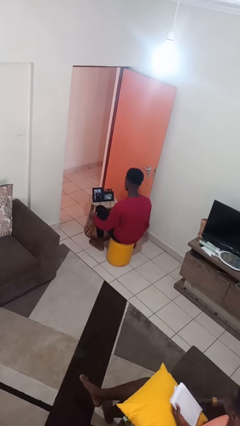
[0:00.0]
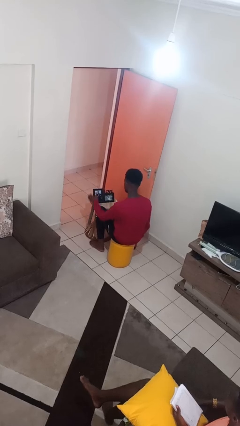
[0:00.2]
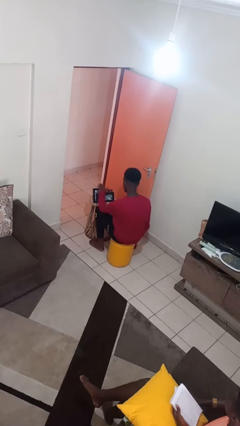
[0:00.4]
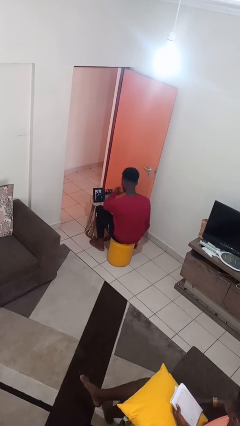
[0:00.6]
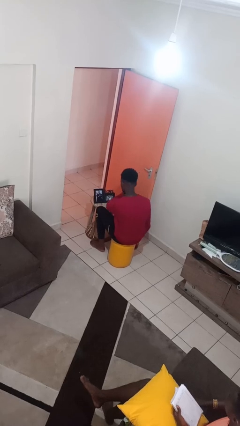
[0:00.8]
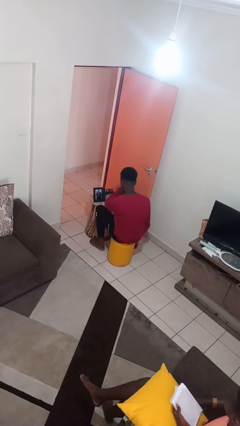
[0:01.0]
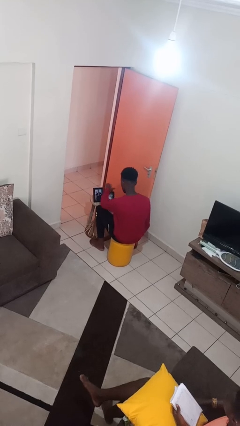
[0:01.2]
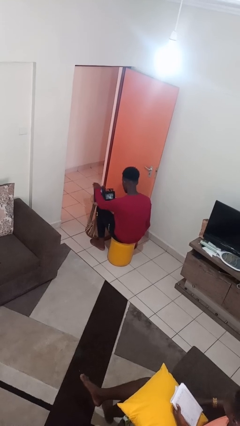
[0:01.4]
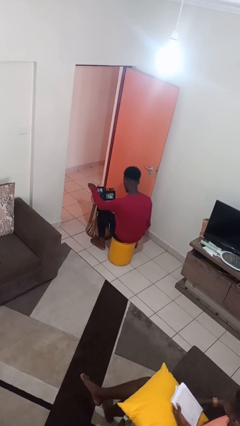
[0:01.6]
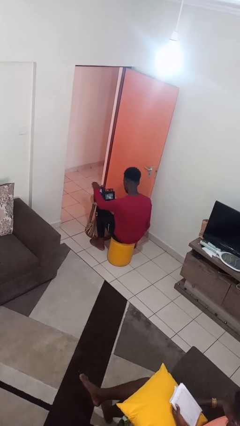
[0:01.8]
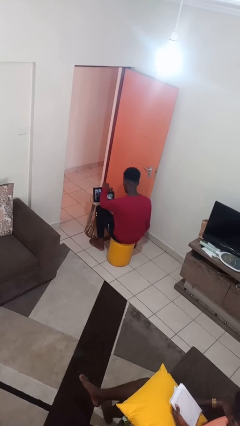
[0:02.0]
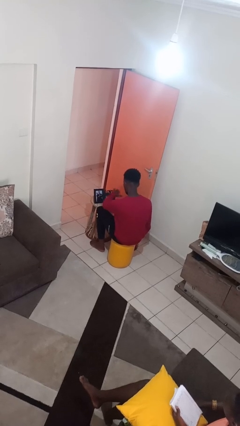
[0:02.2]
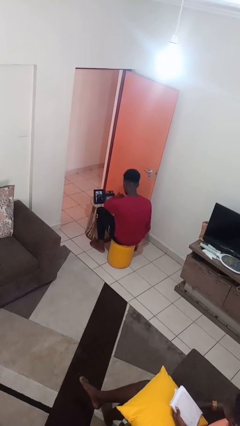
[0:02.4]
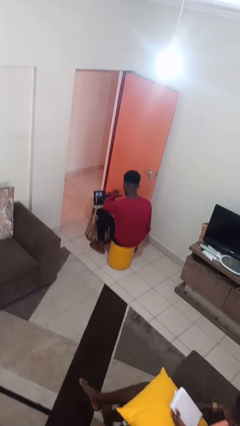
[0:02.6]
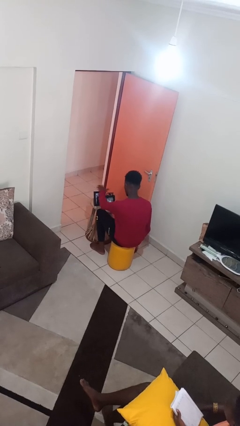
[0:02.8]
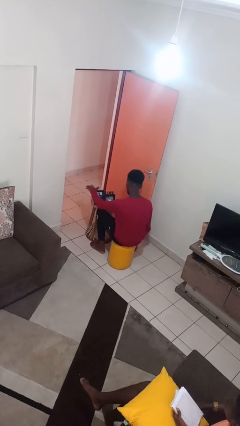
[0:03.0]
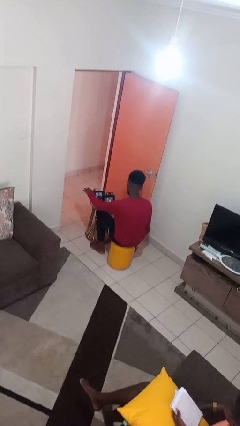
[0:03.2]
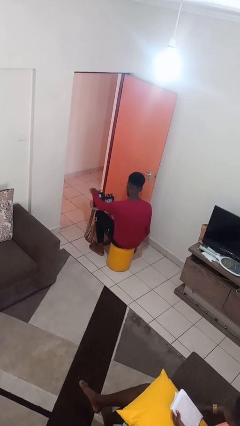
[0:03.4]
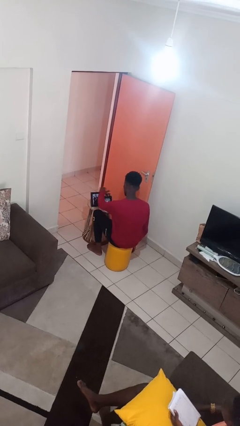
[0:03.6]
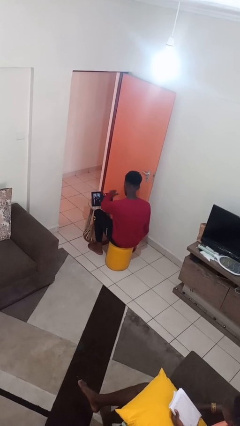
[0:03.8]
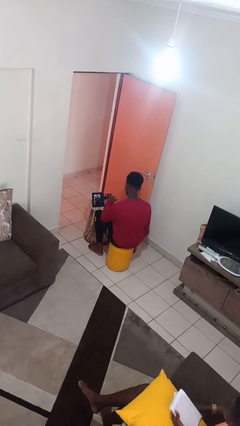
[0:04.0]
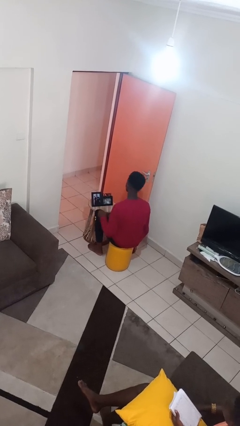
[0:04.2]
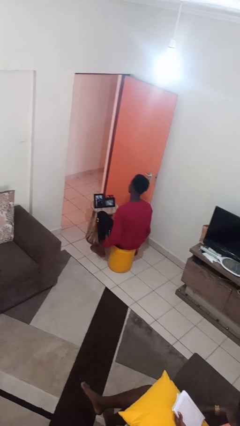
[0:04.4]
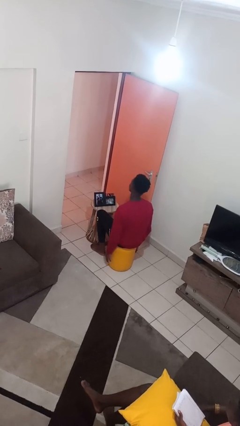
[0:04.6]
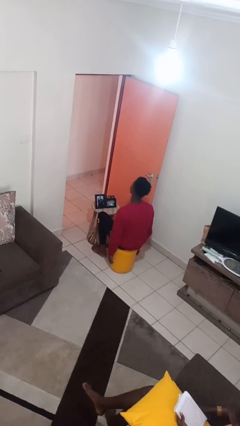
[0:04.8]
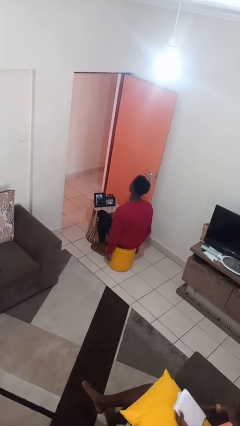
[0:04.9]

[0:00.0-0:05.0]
person waves hand over object

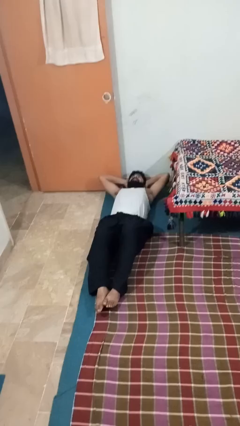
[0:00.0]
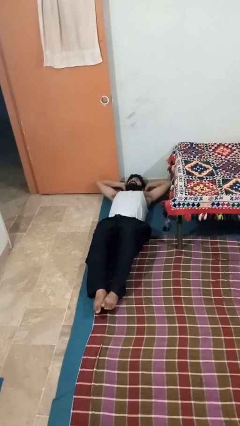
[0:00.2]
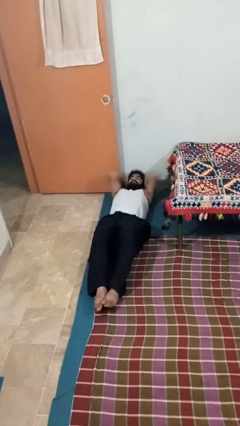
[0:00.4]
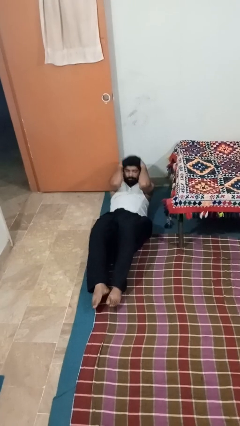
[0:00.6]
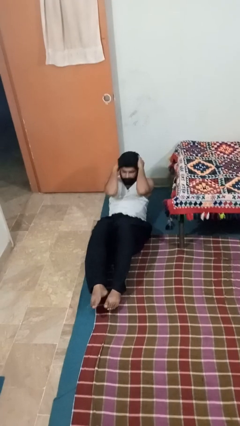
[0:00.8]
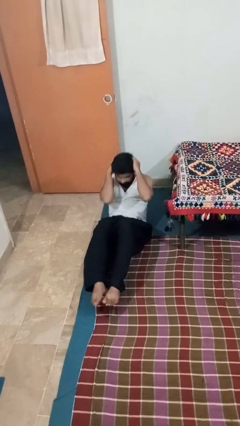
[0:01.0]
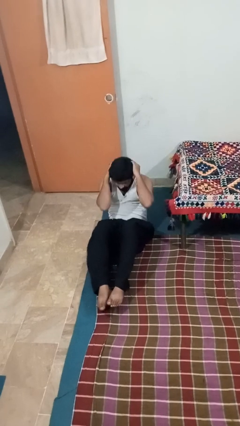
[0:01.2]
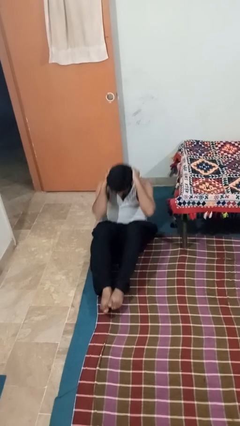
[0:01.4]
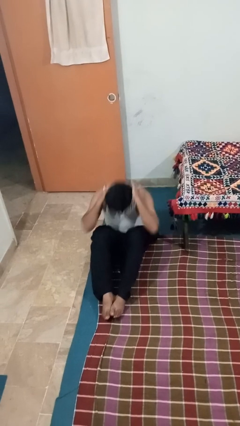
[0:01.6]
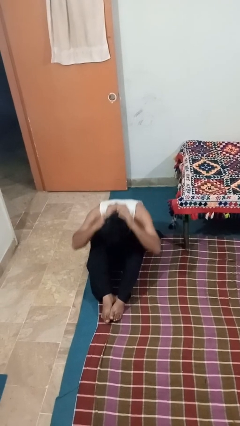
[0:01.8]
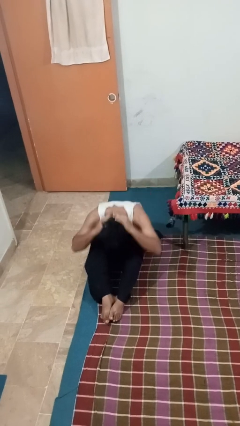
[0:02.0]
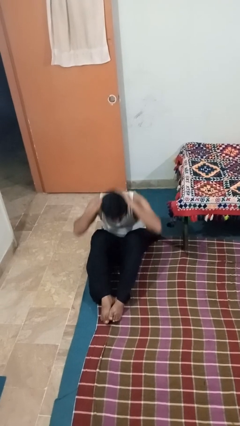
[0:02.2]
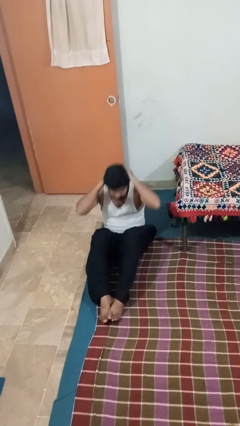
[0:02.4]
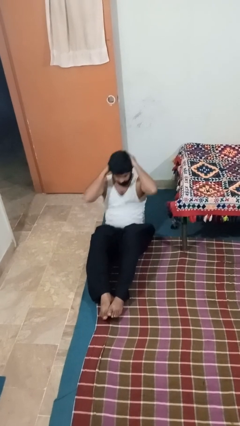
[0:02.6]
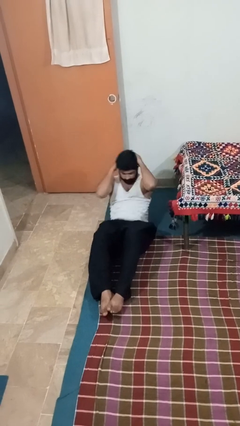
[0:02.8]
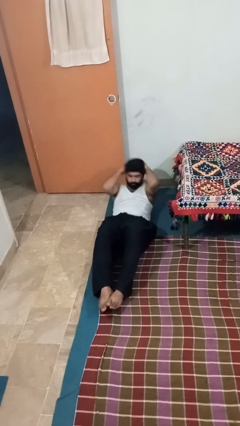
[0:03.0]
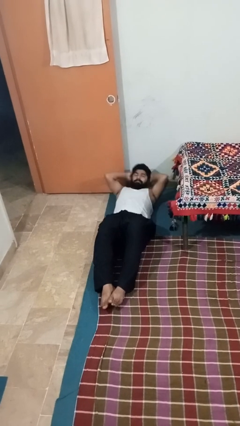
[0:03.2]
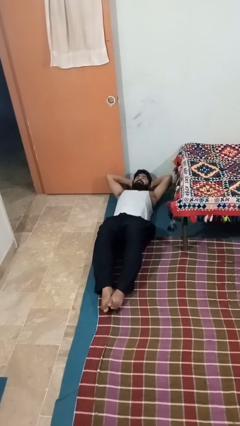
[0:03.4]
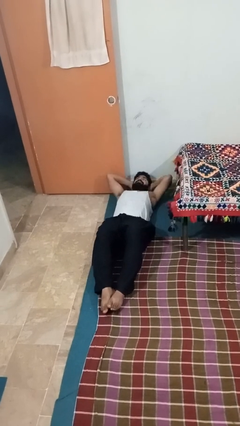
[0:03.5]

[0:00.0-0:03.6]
person exercises with situp

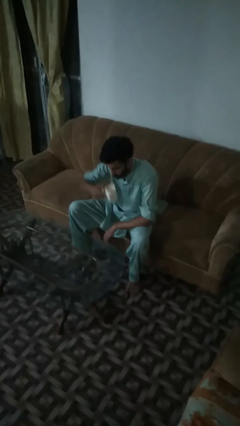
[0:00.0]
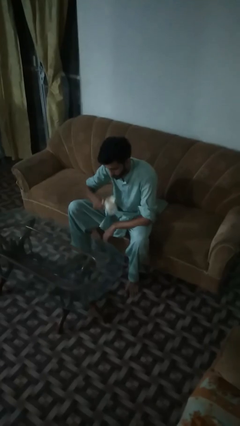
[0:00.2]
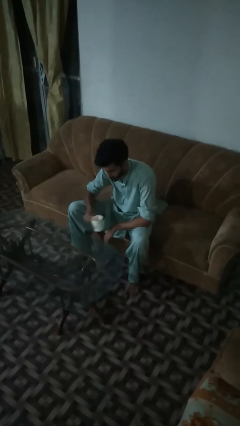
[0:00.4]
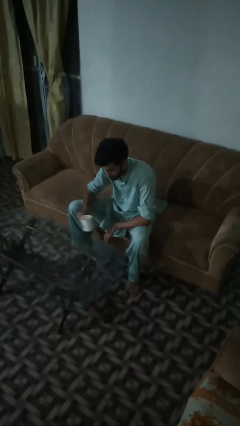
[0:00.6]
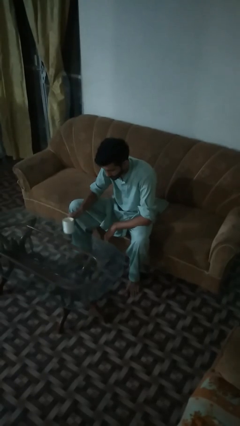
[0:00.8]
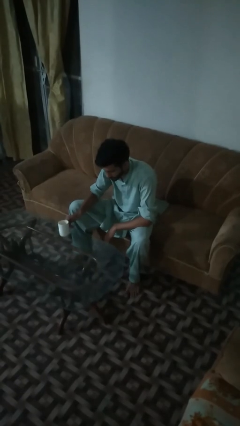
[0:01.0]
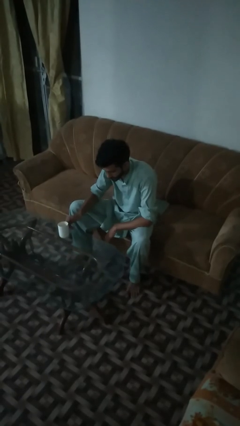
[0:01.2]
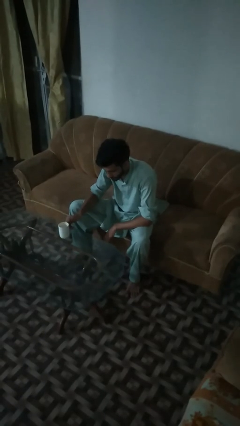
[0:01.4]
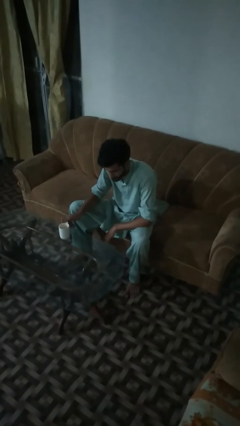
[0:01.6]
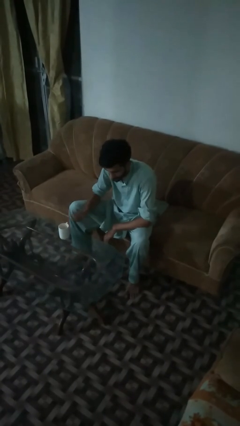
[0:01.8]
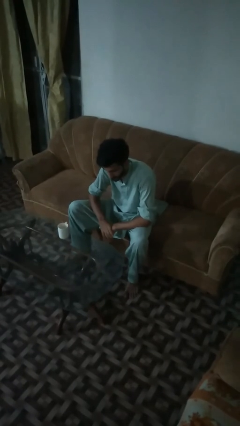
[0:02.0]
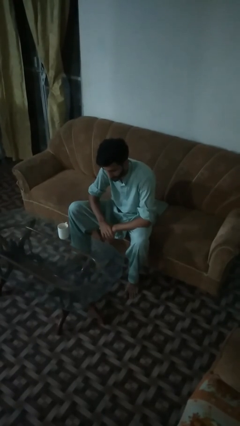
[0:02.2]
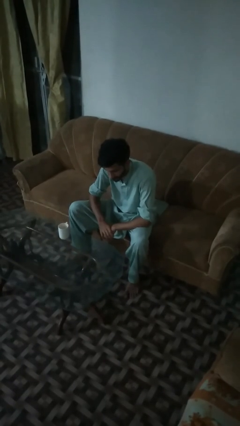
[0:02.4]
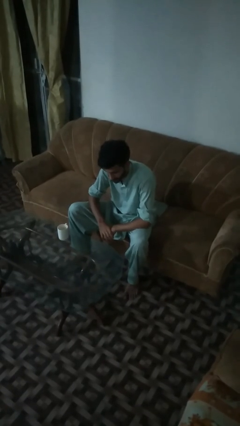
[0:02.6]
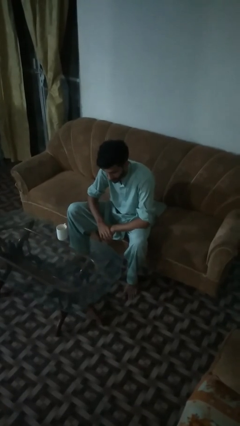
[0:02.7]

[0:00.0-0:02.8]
person puts down object on table

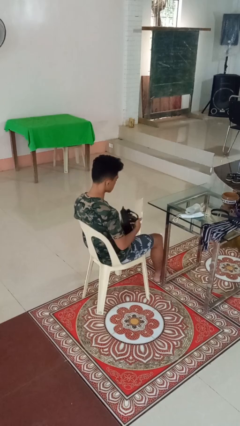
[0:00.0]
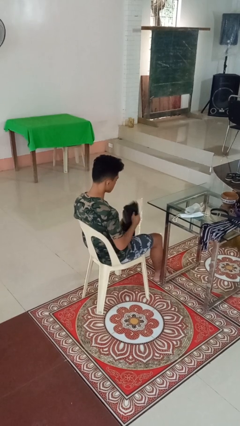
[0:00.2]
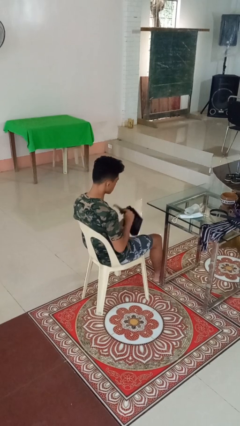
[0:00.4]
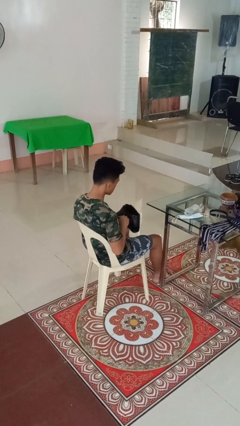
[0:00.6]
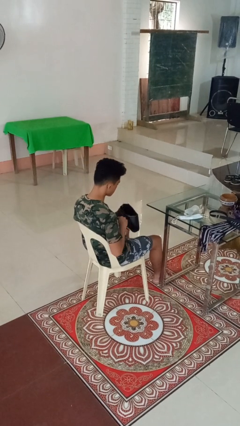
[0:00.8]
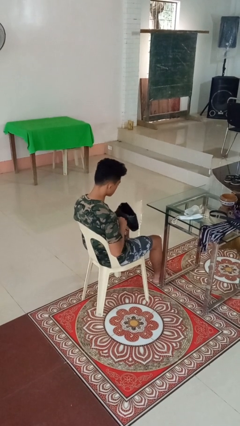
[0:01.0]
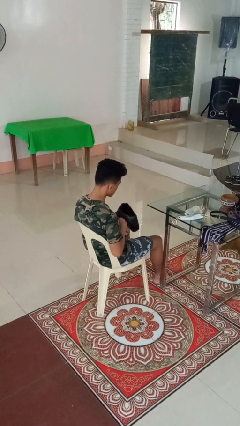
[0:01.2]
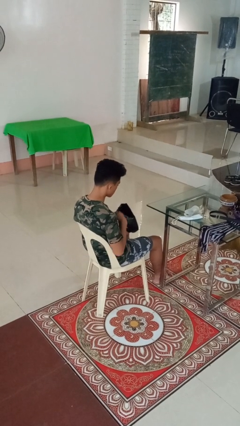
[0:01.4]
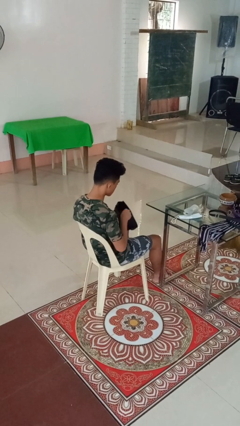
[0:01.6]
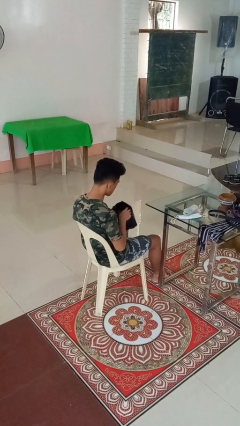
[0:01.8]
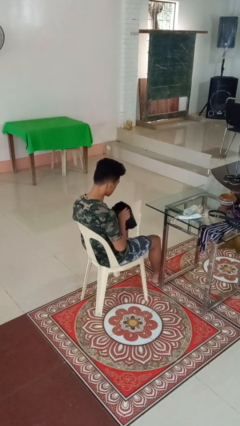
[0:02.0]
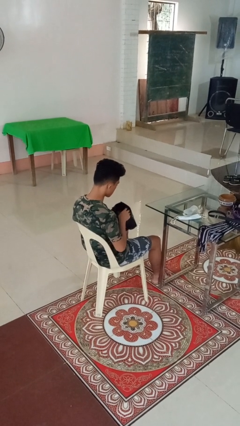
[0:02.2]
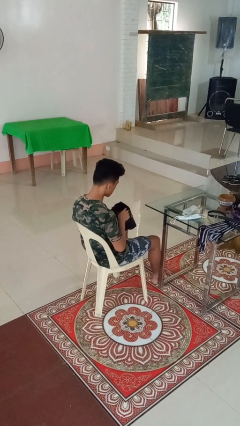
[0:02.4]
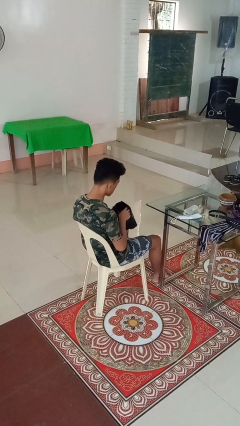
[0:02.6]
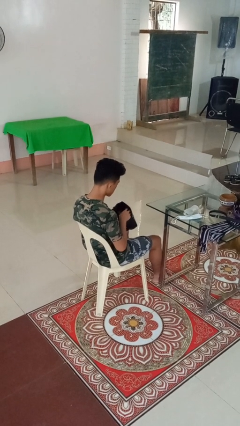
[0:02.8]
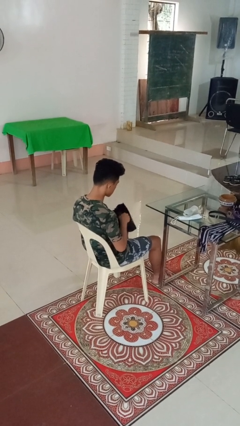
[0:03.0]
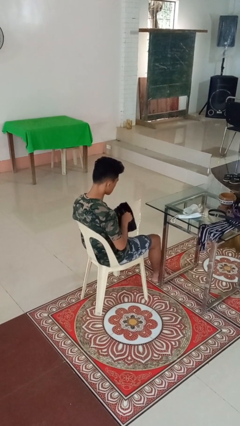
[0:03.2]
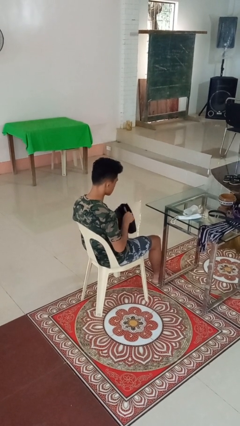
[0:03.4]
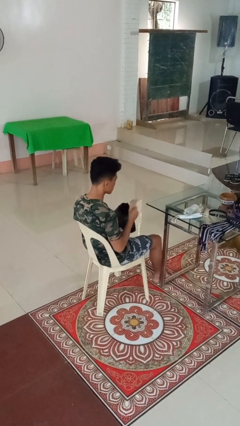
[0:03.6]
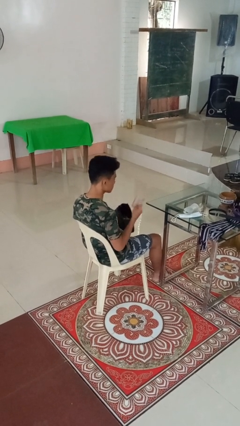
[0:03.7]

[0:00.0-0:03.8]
person searches in purse

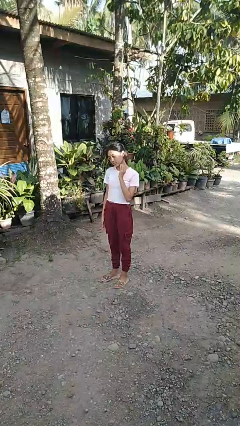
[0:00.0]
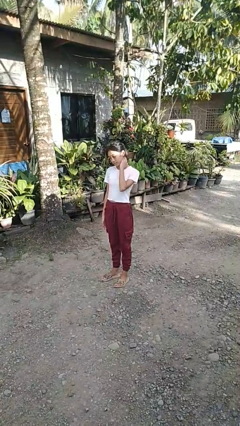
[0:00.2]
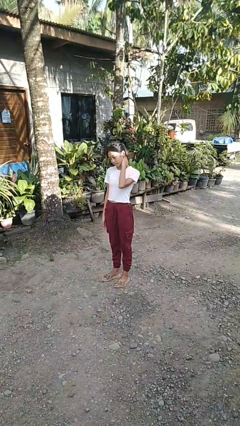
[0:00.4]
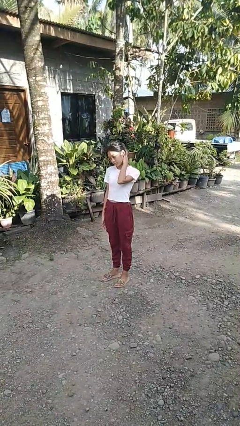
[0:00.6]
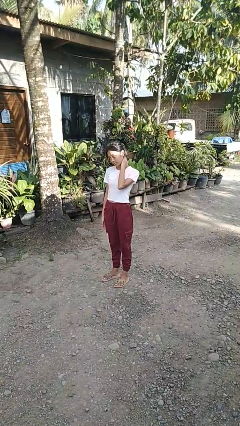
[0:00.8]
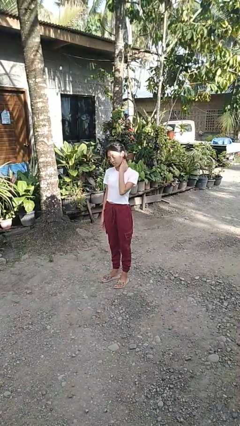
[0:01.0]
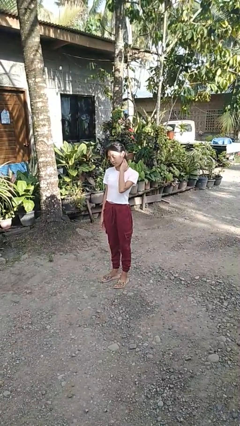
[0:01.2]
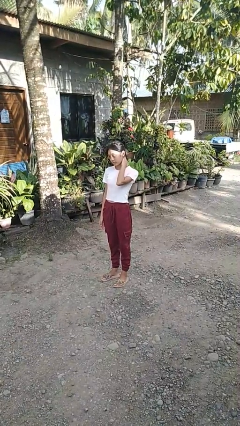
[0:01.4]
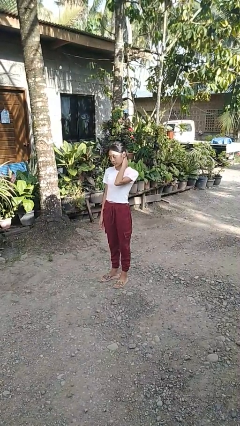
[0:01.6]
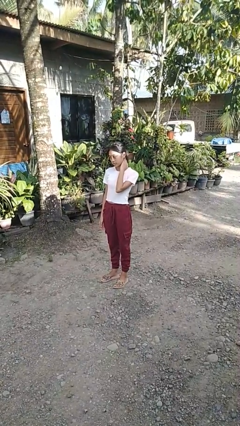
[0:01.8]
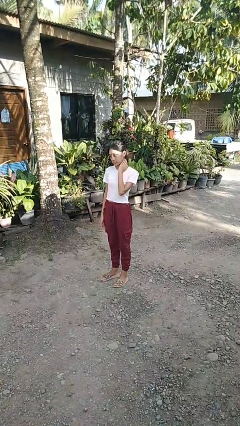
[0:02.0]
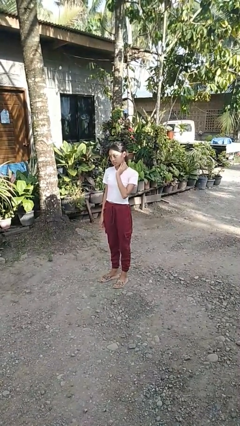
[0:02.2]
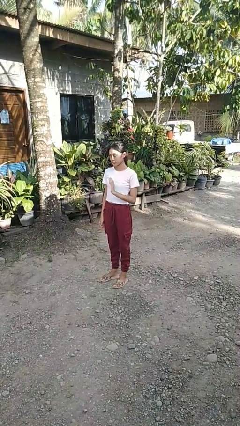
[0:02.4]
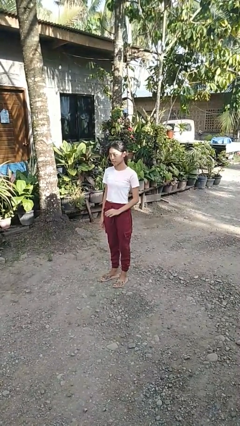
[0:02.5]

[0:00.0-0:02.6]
person rubs neck

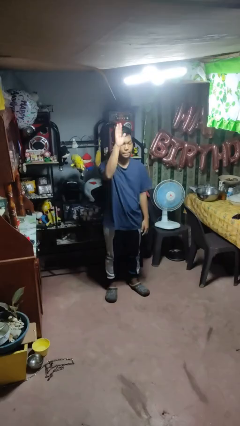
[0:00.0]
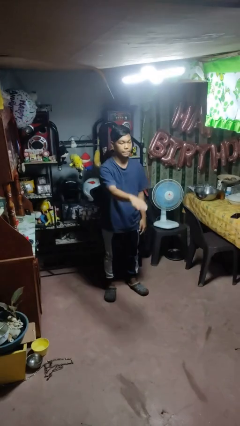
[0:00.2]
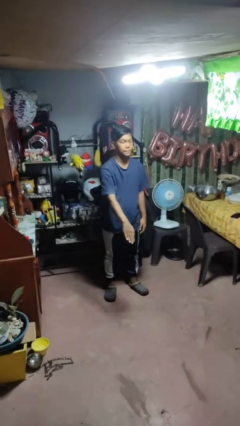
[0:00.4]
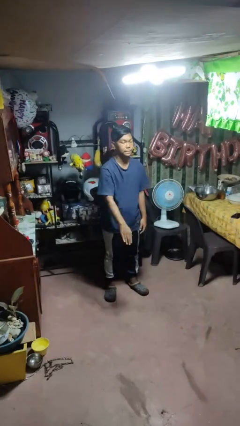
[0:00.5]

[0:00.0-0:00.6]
person gestures swipe down
